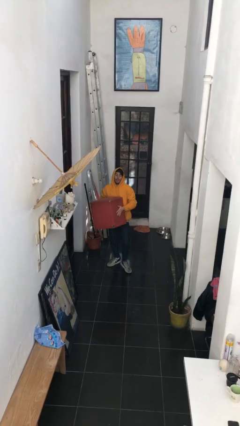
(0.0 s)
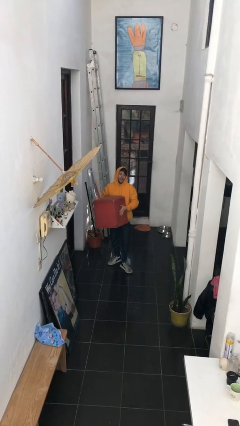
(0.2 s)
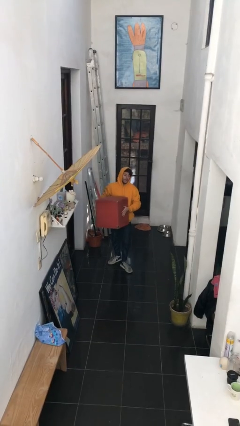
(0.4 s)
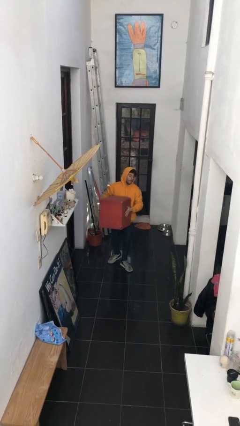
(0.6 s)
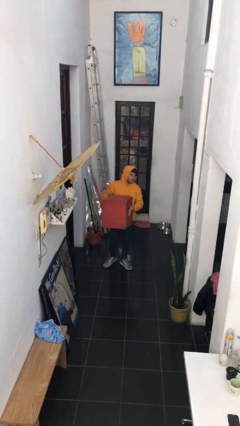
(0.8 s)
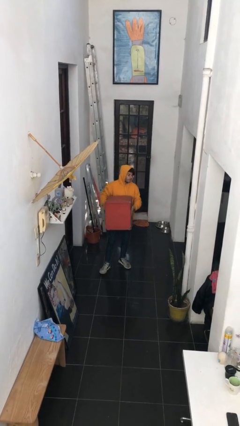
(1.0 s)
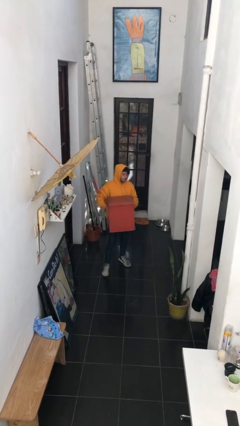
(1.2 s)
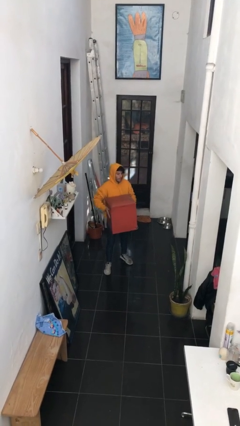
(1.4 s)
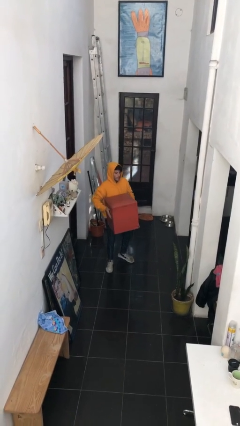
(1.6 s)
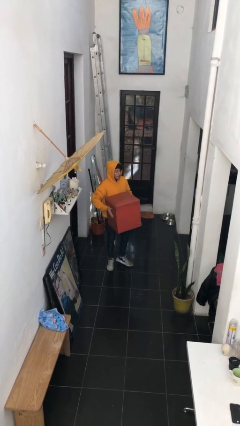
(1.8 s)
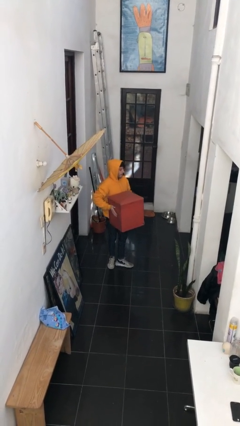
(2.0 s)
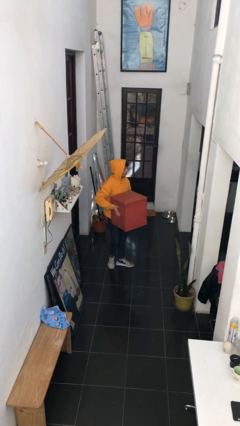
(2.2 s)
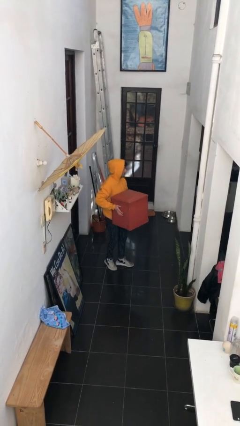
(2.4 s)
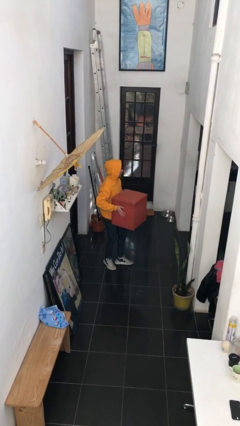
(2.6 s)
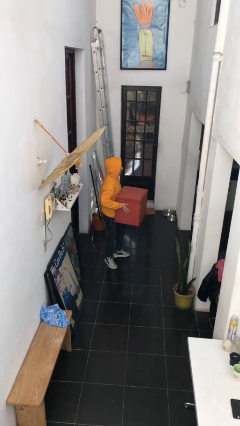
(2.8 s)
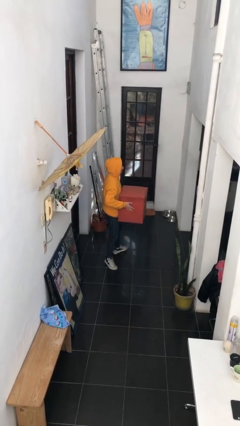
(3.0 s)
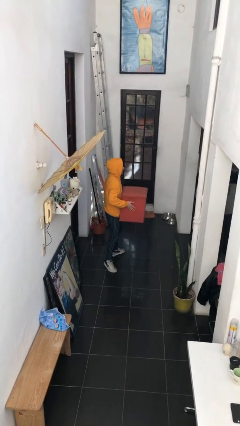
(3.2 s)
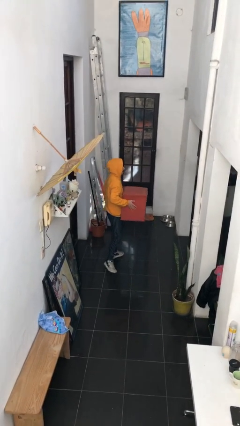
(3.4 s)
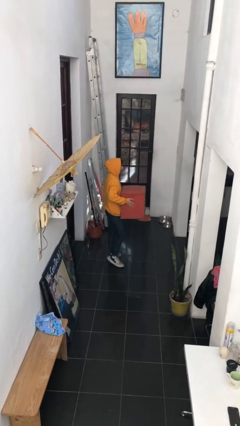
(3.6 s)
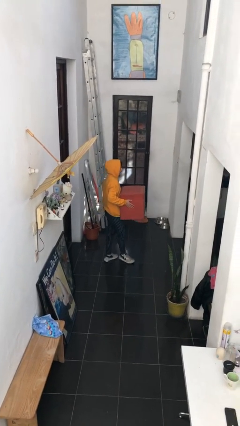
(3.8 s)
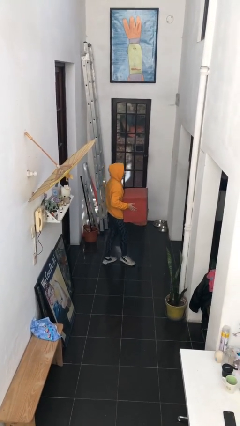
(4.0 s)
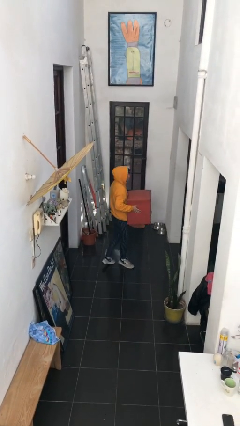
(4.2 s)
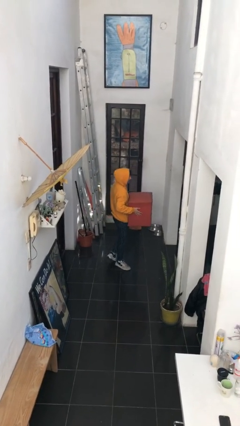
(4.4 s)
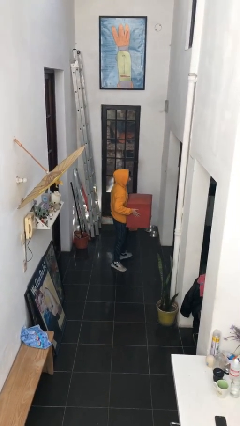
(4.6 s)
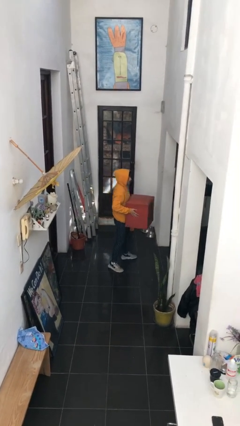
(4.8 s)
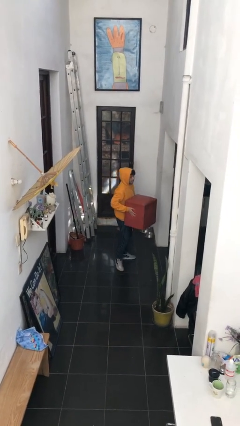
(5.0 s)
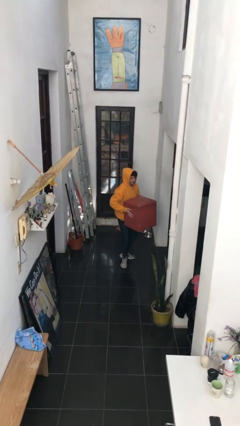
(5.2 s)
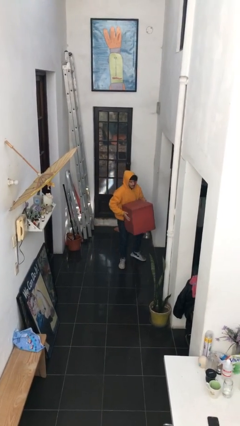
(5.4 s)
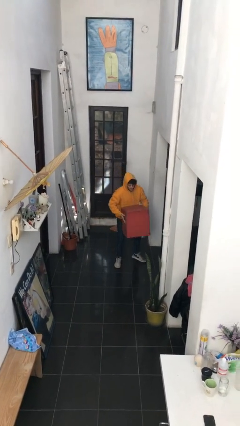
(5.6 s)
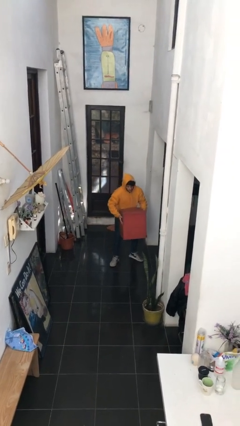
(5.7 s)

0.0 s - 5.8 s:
person carries heavy object

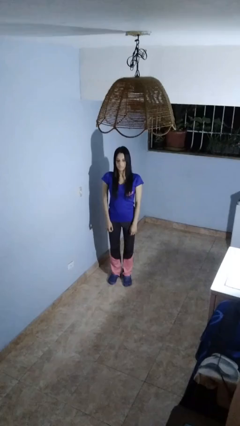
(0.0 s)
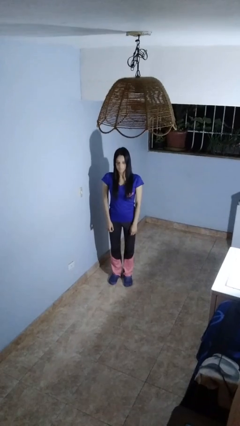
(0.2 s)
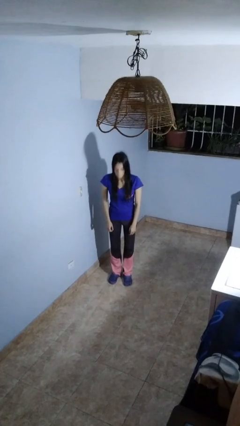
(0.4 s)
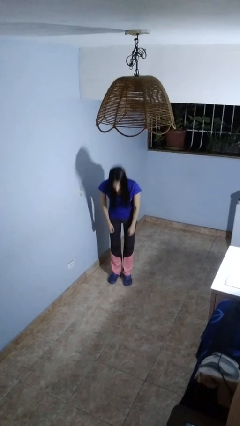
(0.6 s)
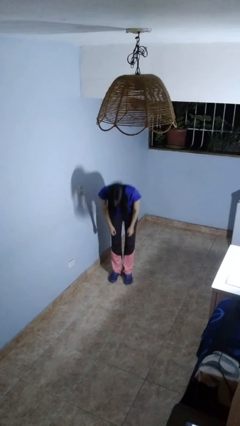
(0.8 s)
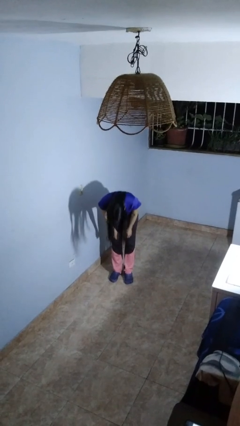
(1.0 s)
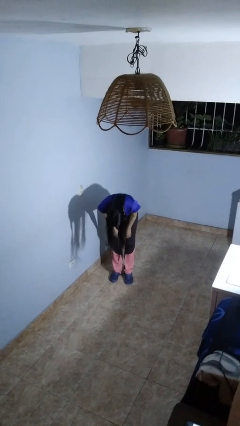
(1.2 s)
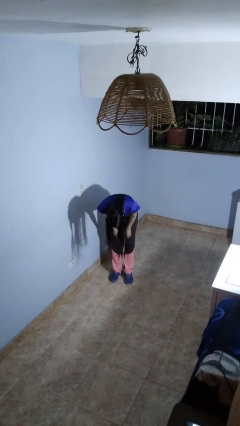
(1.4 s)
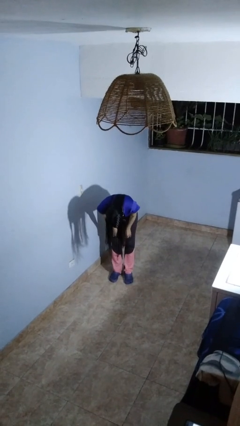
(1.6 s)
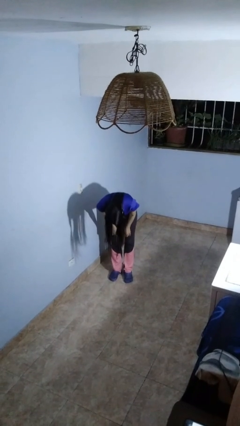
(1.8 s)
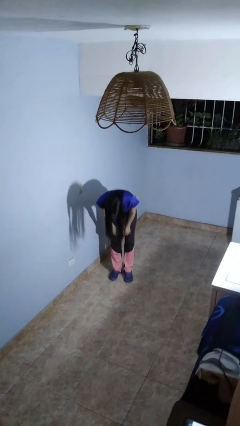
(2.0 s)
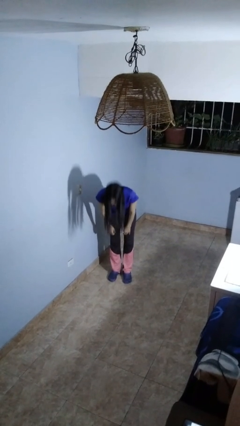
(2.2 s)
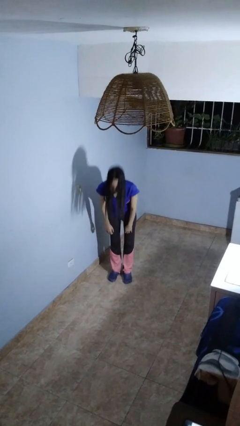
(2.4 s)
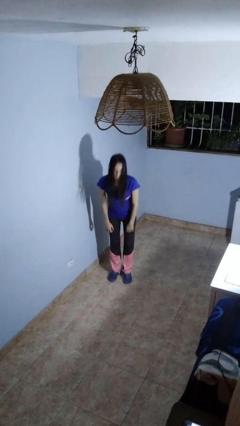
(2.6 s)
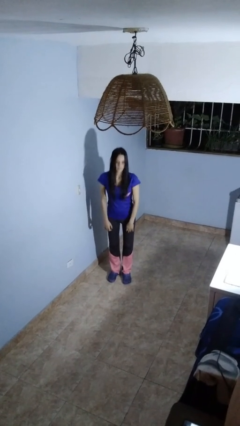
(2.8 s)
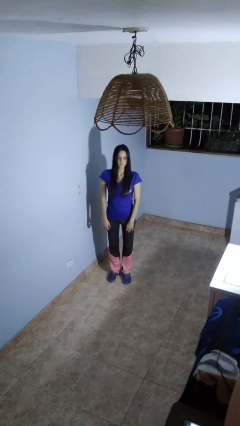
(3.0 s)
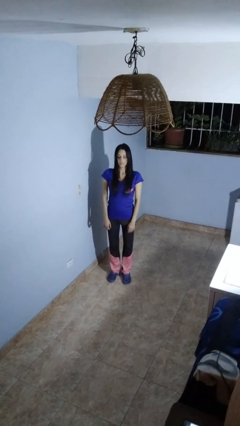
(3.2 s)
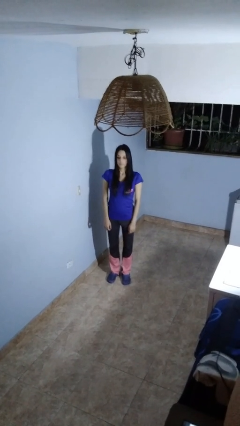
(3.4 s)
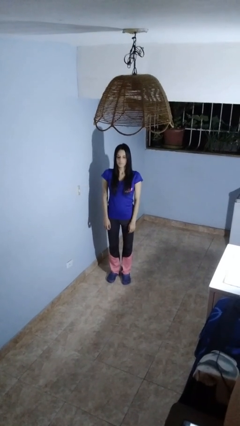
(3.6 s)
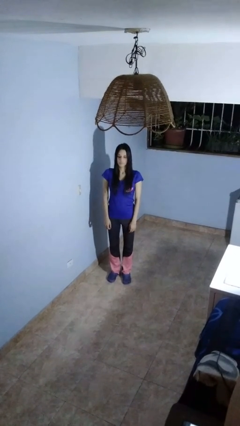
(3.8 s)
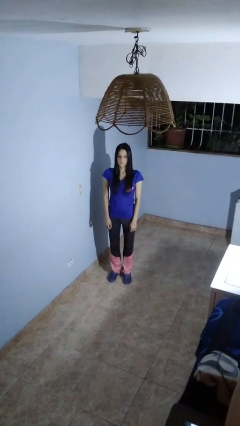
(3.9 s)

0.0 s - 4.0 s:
person bows

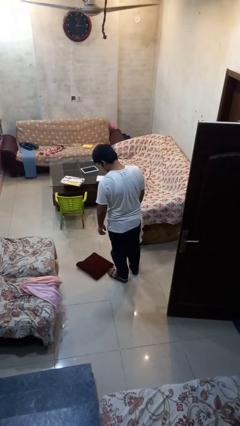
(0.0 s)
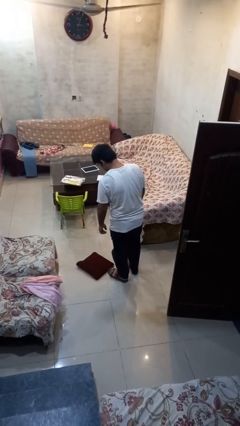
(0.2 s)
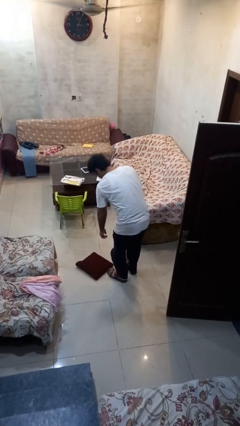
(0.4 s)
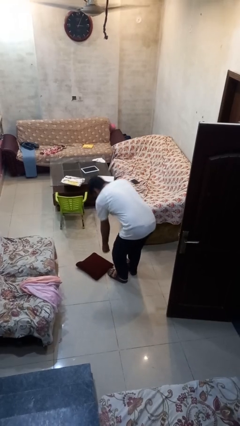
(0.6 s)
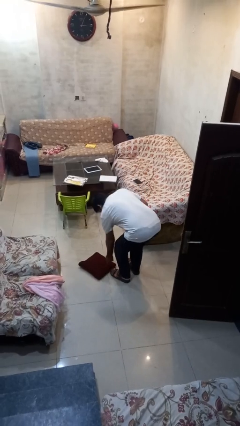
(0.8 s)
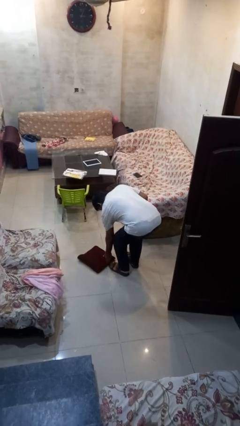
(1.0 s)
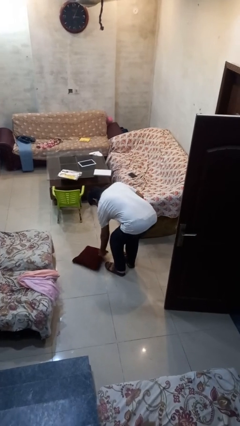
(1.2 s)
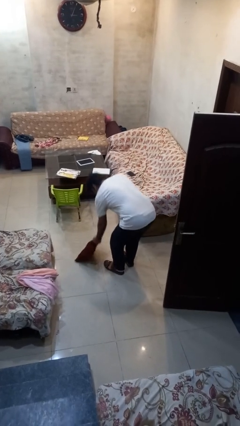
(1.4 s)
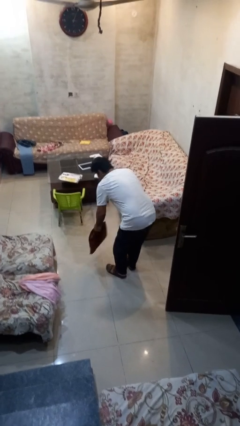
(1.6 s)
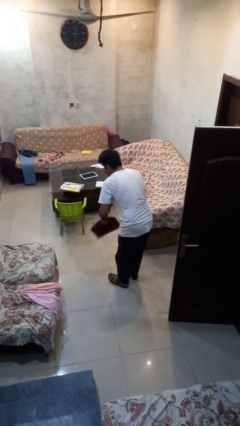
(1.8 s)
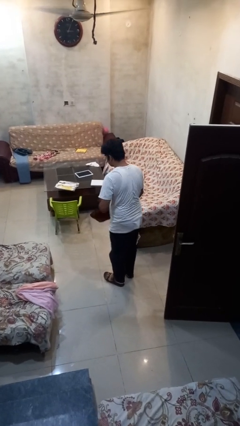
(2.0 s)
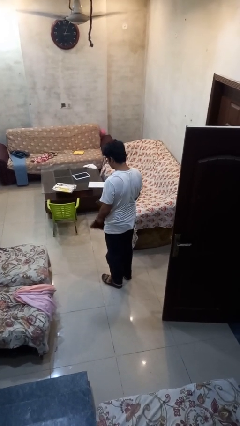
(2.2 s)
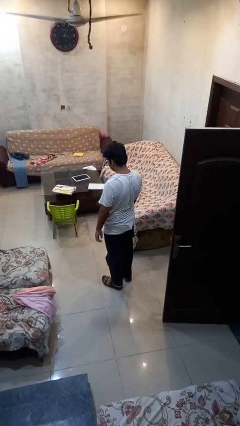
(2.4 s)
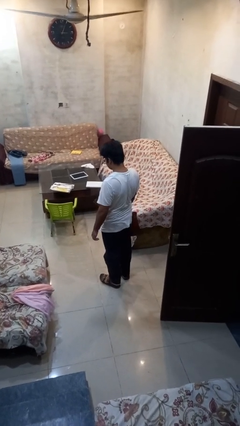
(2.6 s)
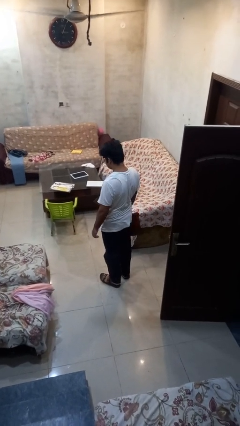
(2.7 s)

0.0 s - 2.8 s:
person picks up object from floor

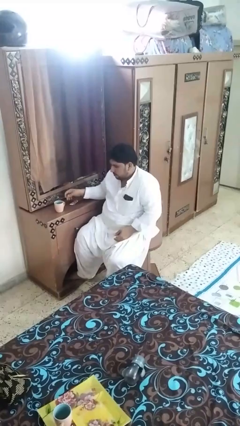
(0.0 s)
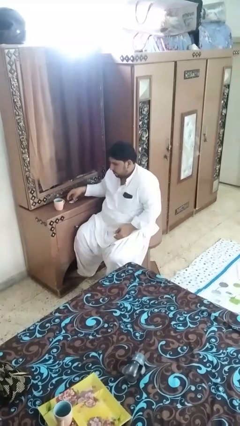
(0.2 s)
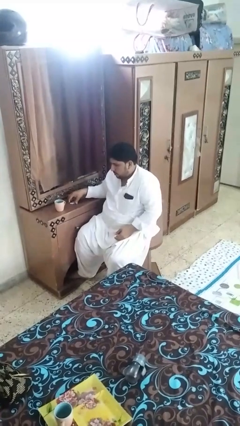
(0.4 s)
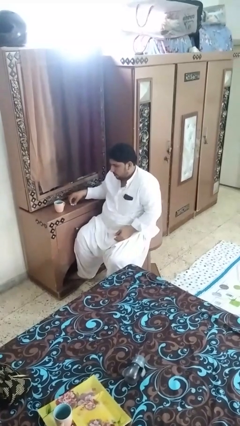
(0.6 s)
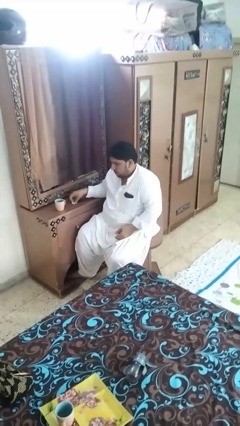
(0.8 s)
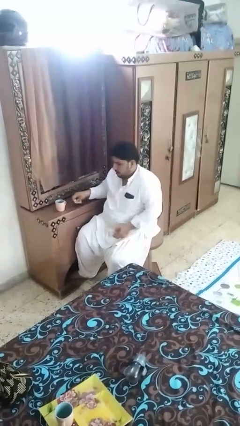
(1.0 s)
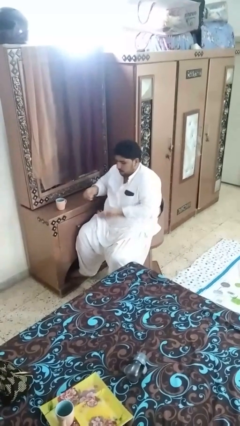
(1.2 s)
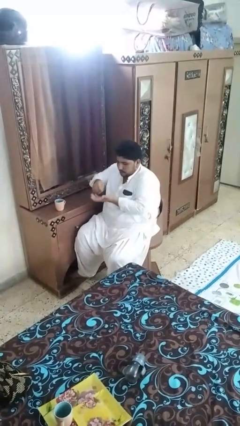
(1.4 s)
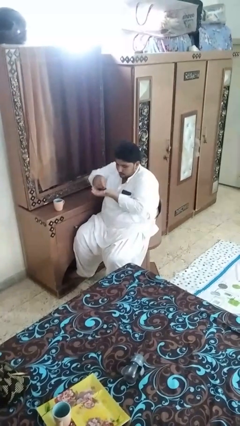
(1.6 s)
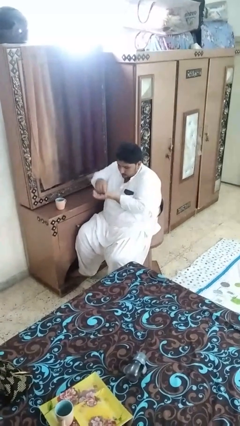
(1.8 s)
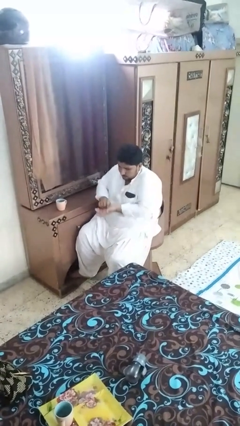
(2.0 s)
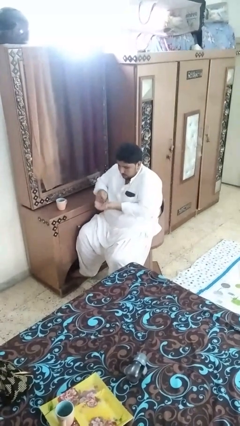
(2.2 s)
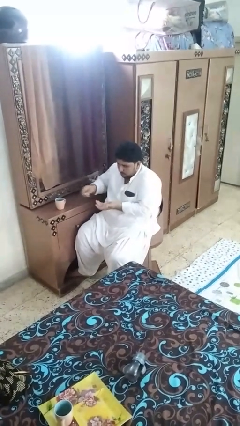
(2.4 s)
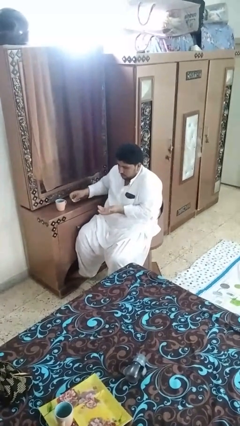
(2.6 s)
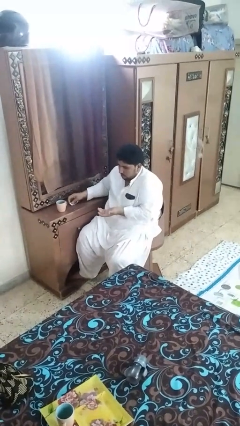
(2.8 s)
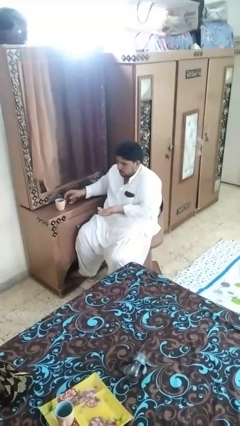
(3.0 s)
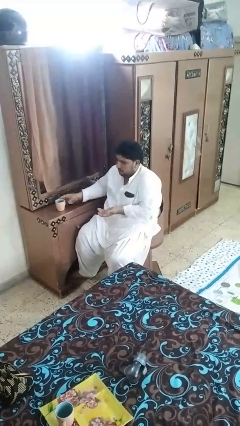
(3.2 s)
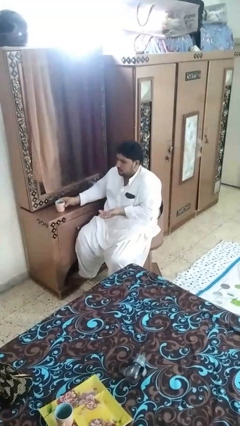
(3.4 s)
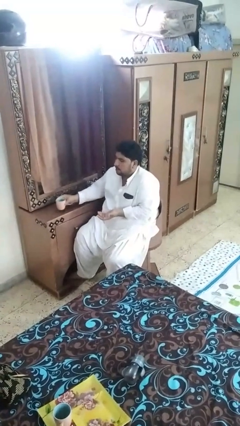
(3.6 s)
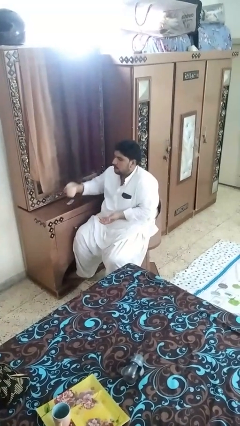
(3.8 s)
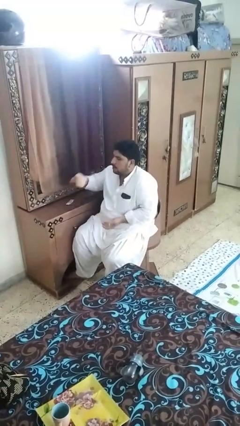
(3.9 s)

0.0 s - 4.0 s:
person takes medicine pills

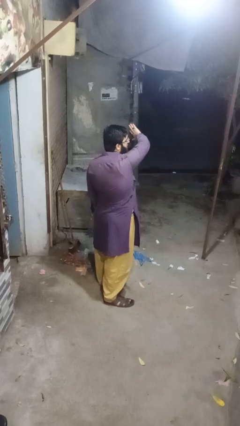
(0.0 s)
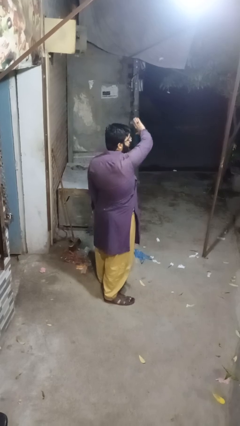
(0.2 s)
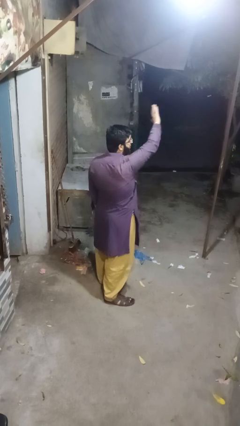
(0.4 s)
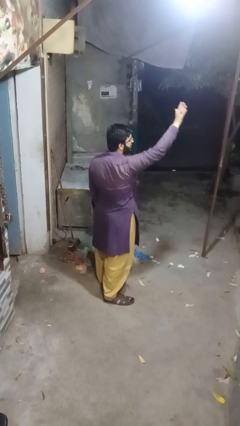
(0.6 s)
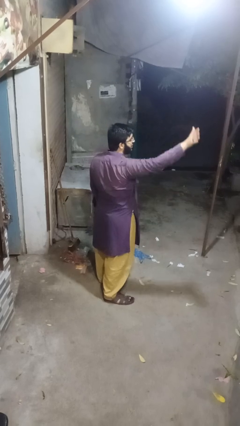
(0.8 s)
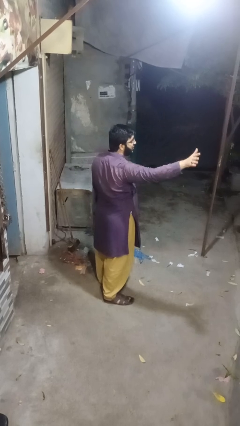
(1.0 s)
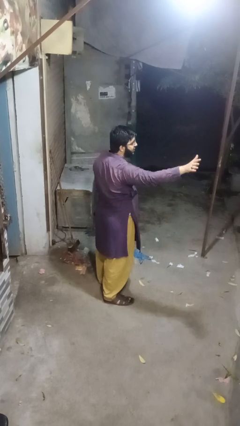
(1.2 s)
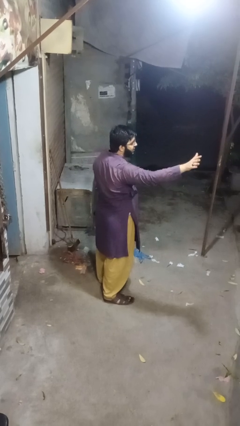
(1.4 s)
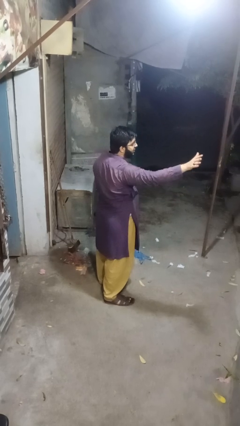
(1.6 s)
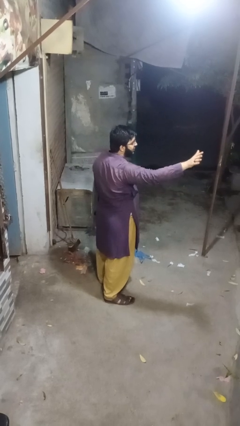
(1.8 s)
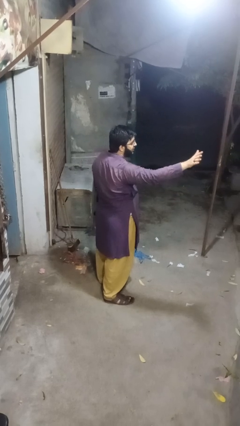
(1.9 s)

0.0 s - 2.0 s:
person gestures swipe right
